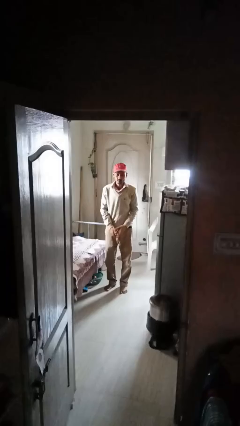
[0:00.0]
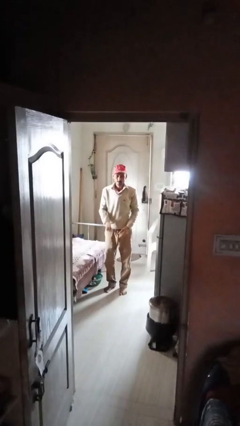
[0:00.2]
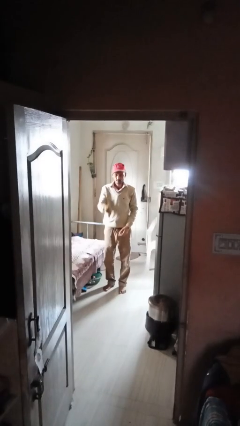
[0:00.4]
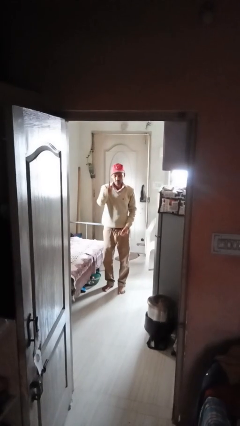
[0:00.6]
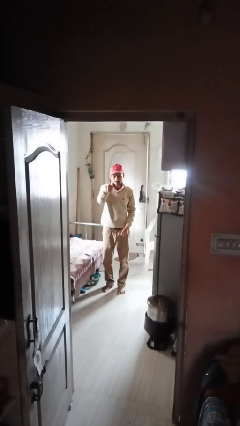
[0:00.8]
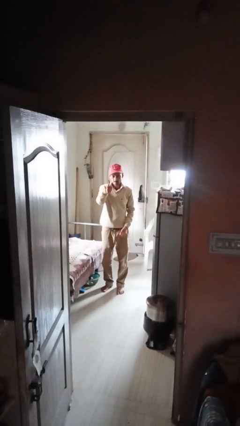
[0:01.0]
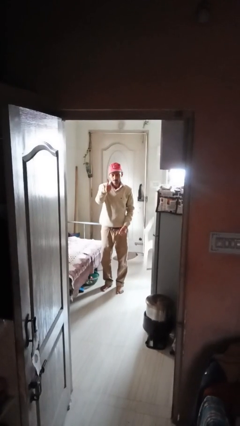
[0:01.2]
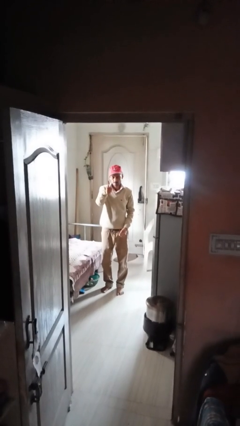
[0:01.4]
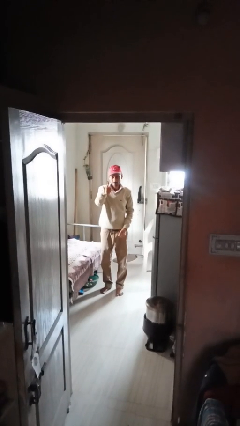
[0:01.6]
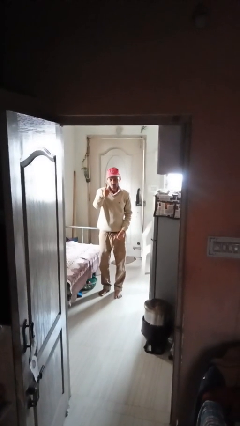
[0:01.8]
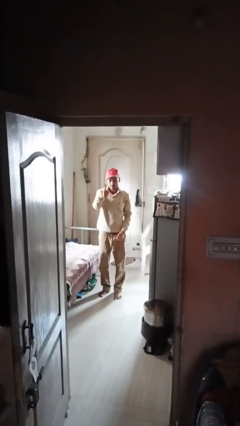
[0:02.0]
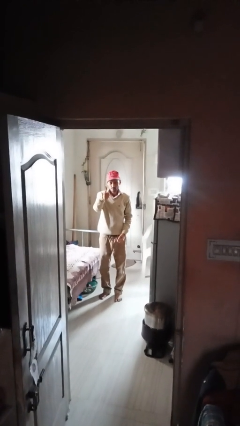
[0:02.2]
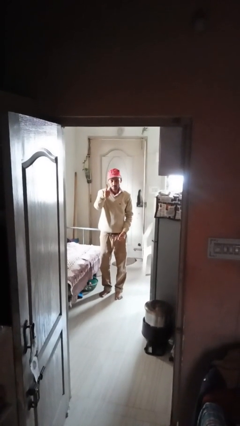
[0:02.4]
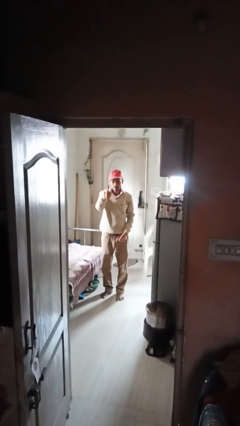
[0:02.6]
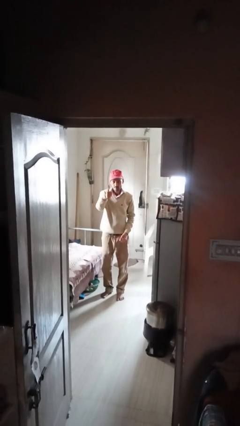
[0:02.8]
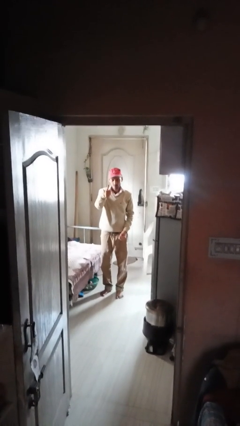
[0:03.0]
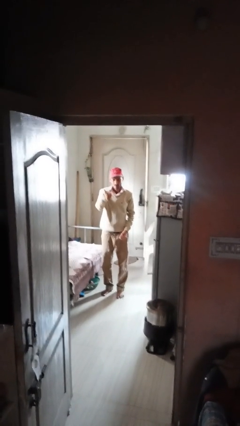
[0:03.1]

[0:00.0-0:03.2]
person gestures thumbs up

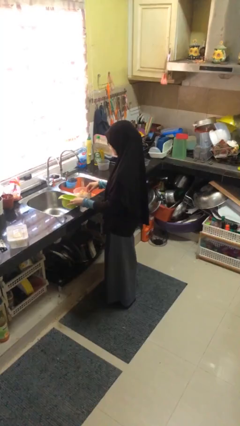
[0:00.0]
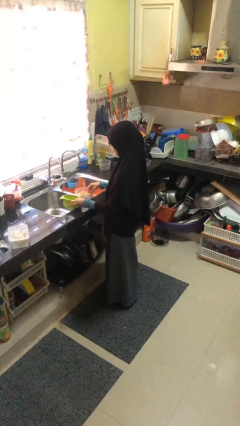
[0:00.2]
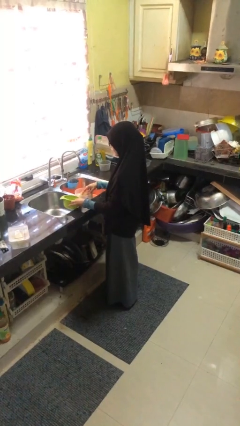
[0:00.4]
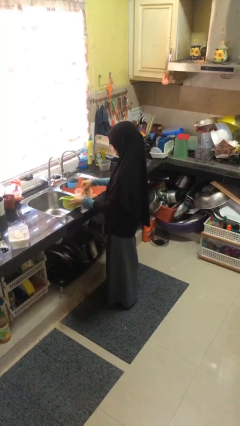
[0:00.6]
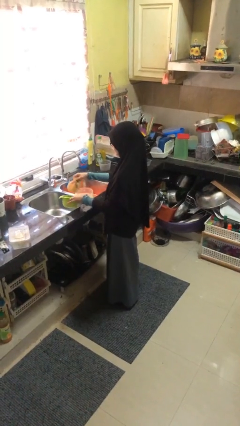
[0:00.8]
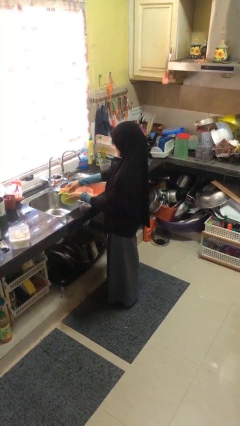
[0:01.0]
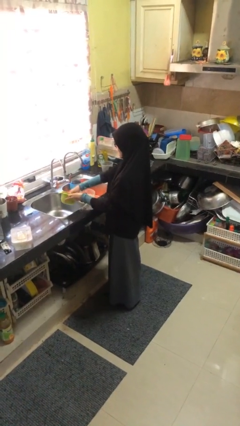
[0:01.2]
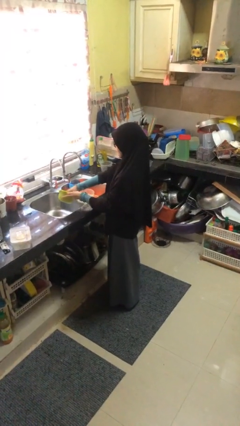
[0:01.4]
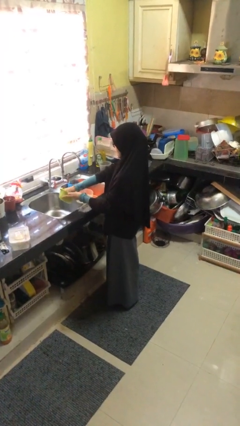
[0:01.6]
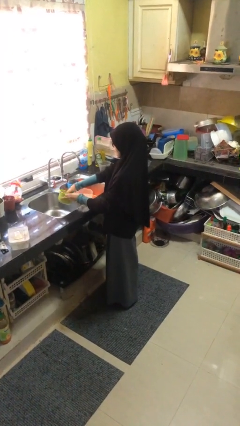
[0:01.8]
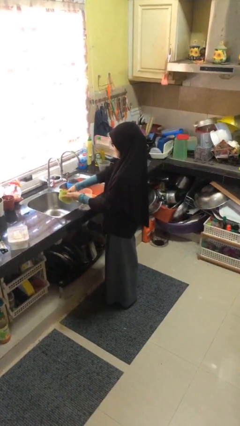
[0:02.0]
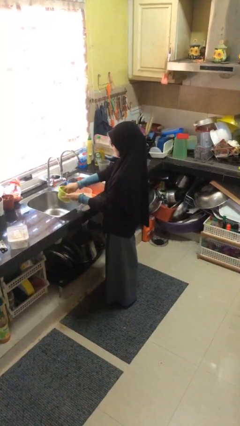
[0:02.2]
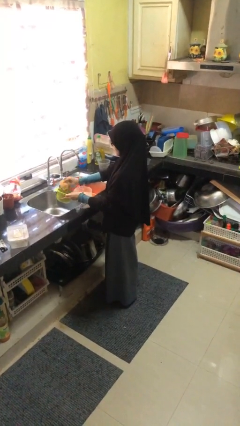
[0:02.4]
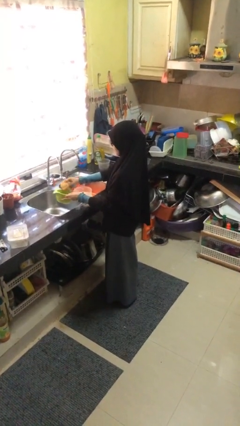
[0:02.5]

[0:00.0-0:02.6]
person washes dish

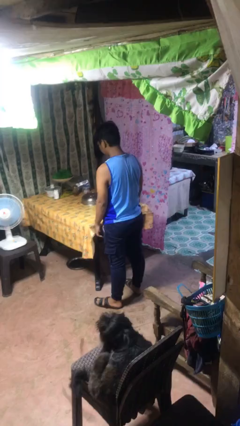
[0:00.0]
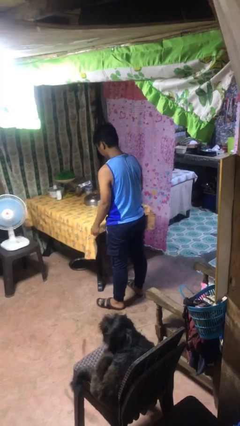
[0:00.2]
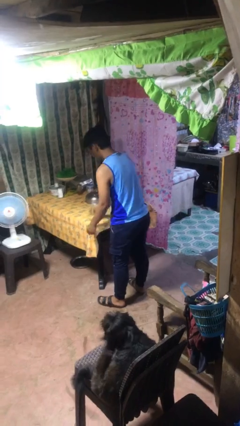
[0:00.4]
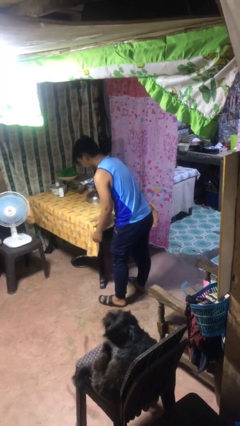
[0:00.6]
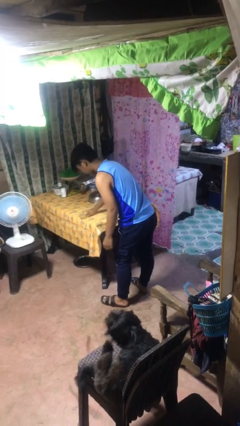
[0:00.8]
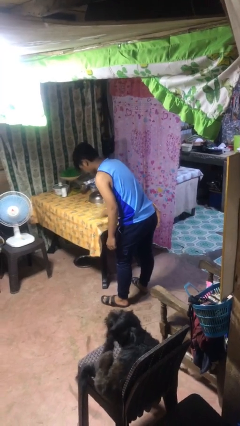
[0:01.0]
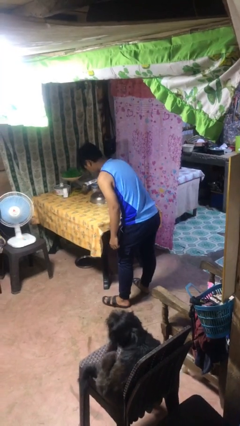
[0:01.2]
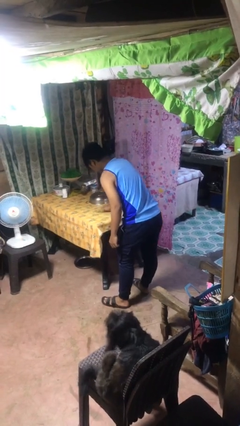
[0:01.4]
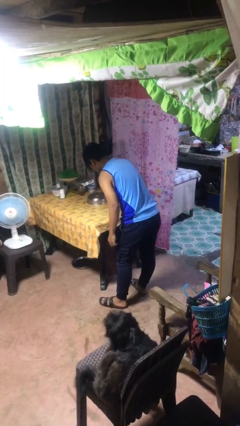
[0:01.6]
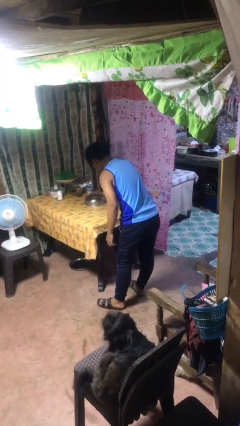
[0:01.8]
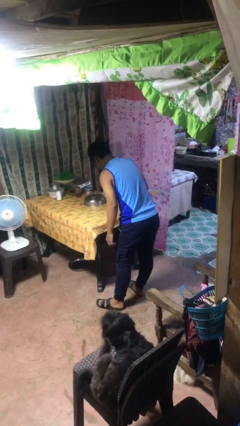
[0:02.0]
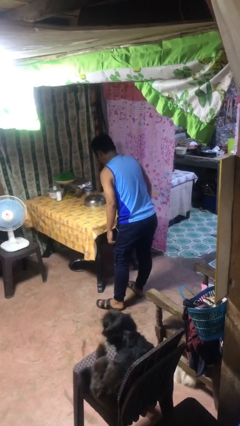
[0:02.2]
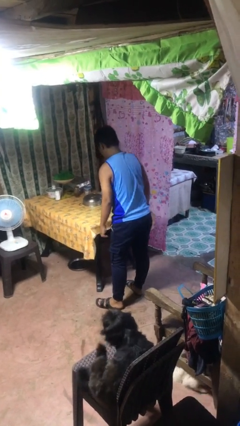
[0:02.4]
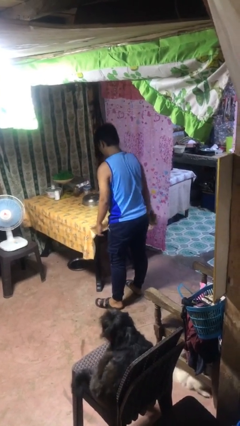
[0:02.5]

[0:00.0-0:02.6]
person cleans table with rag

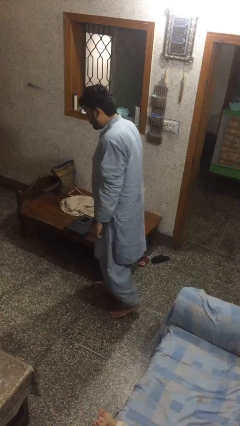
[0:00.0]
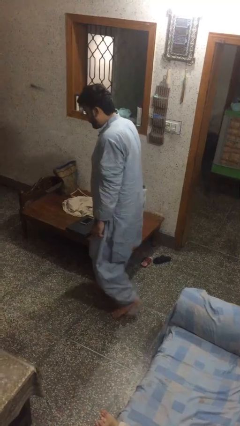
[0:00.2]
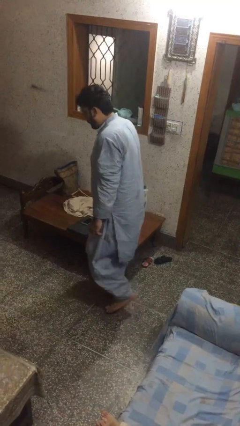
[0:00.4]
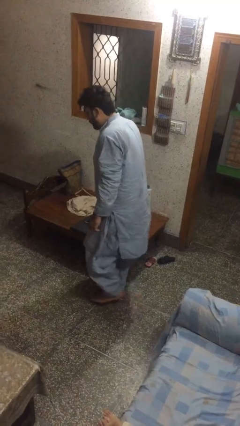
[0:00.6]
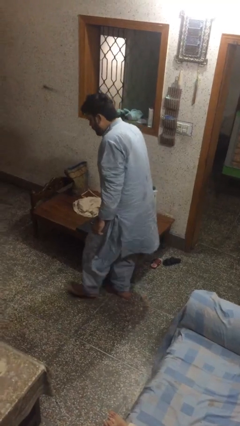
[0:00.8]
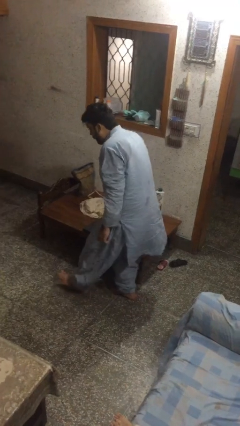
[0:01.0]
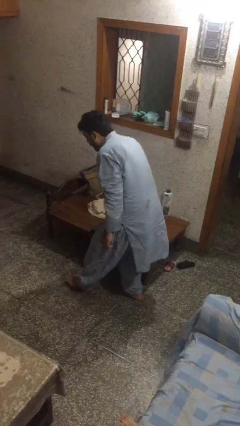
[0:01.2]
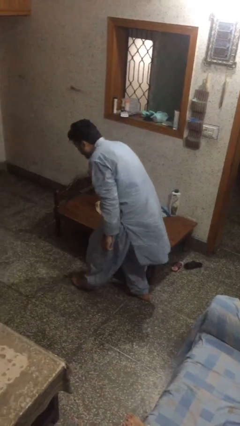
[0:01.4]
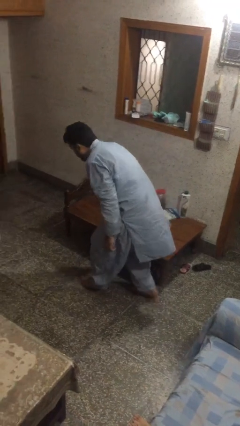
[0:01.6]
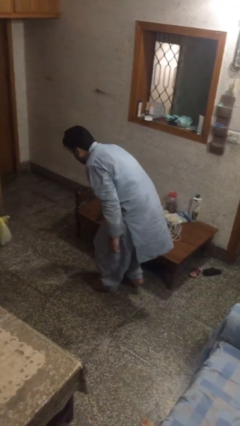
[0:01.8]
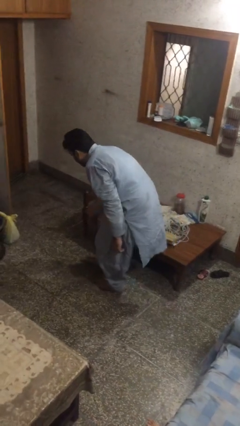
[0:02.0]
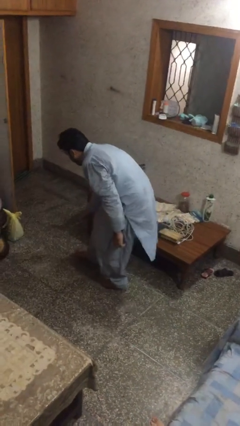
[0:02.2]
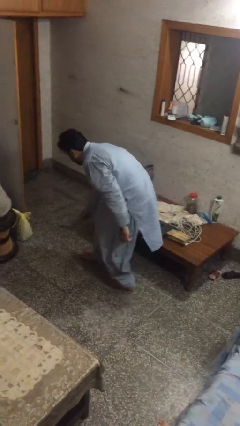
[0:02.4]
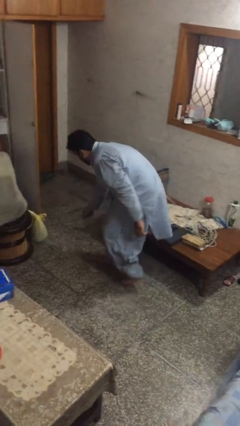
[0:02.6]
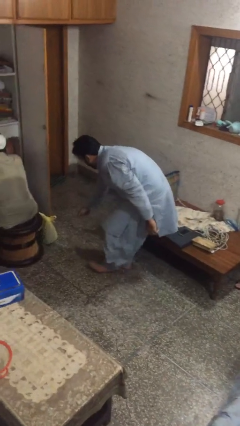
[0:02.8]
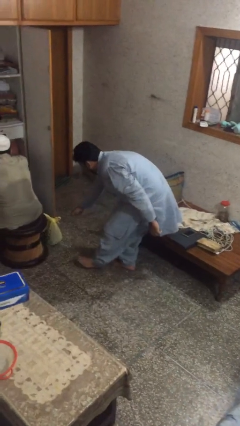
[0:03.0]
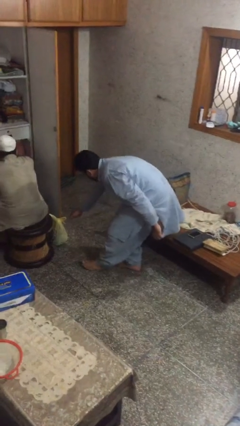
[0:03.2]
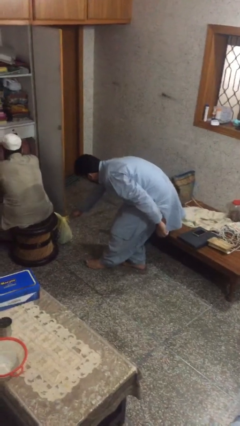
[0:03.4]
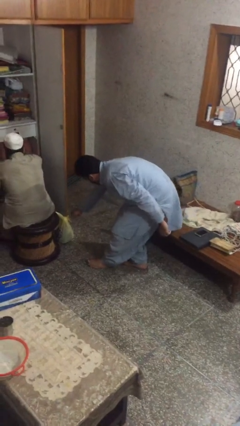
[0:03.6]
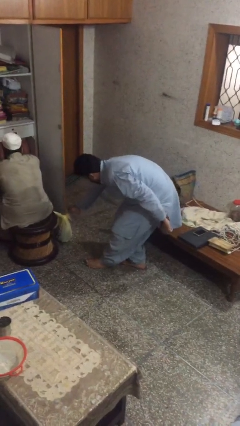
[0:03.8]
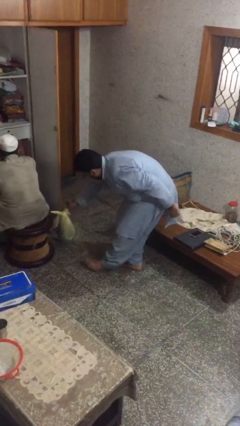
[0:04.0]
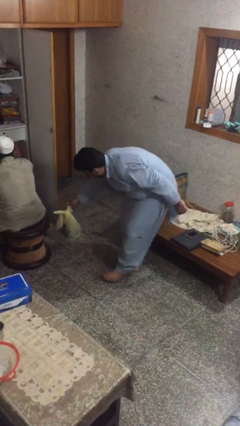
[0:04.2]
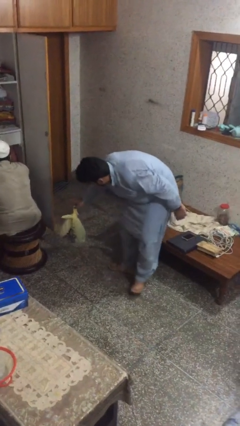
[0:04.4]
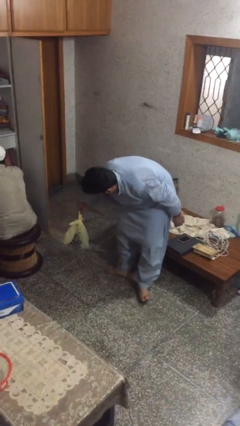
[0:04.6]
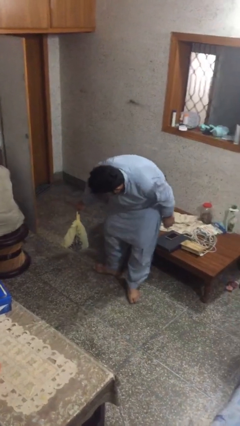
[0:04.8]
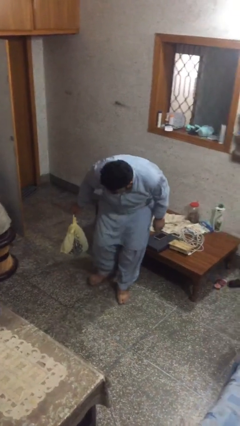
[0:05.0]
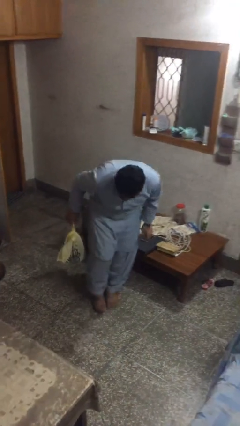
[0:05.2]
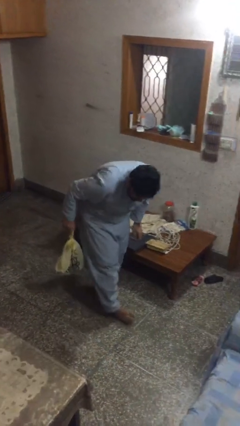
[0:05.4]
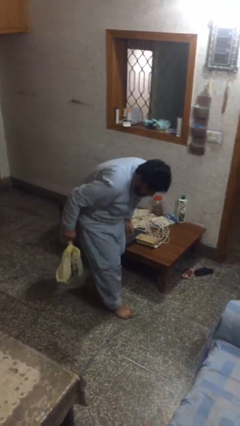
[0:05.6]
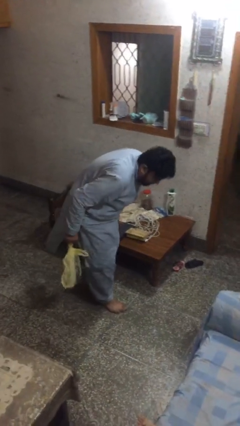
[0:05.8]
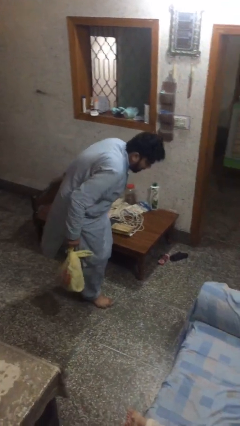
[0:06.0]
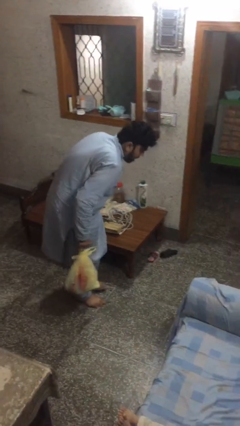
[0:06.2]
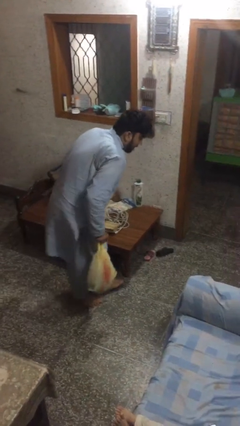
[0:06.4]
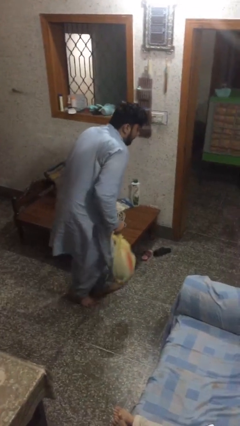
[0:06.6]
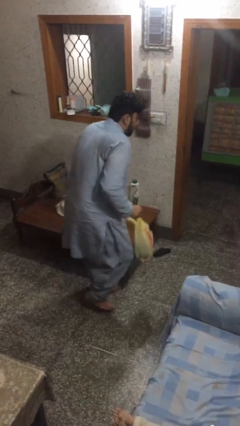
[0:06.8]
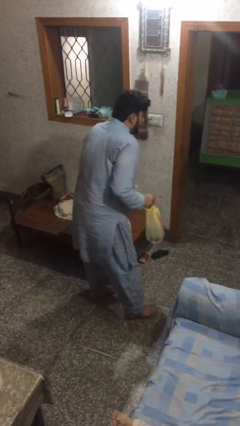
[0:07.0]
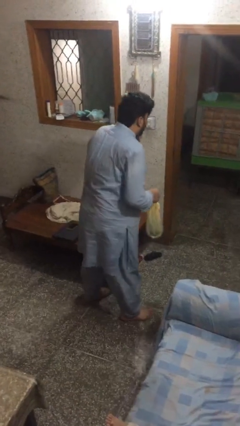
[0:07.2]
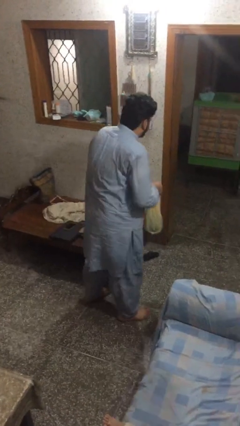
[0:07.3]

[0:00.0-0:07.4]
person steals object from person

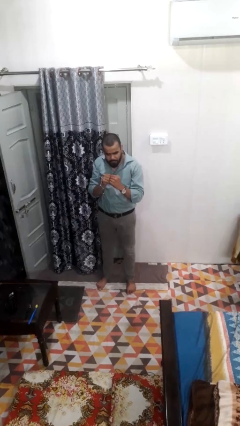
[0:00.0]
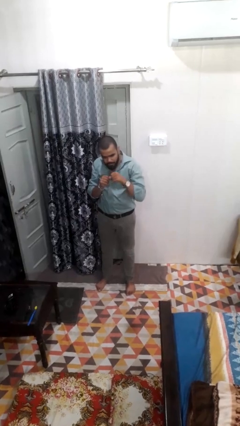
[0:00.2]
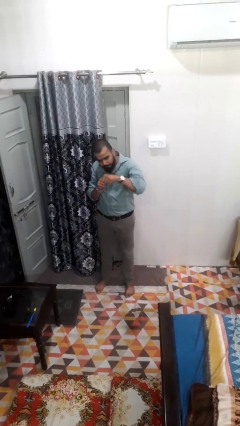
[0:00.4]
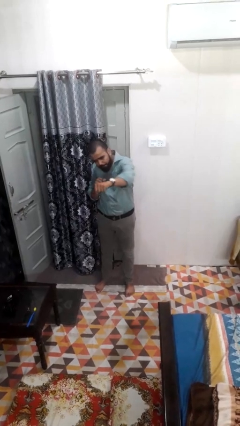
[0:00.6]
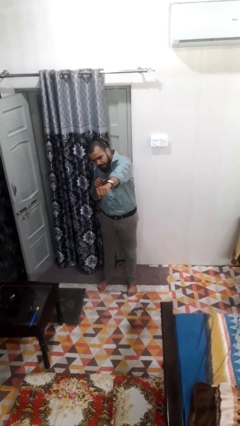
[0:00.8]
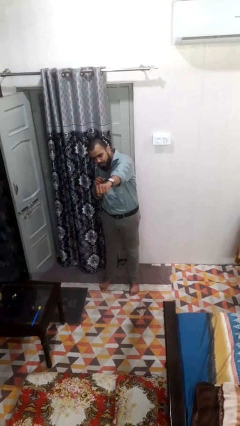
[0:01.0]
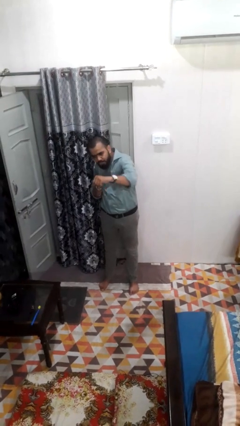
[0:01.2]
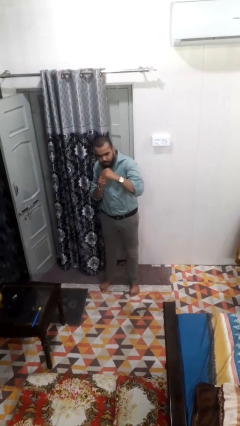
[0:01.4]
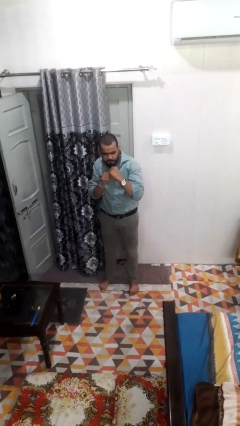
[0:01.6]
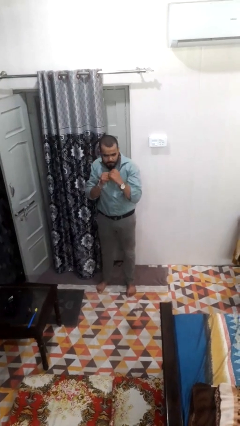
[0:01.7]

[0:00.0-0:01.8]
person punches
